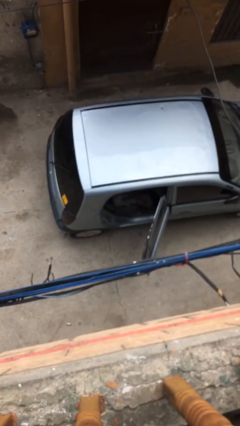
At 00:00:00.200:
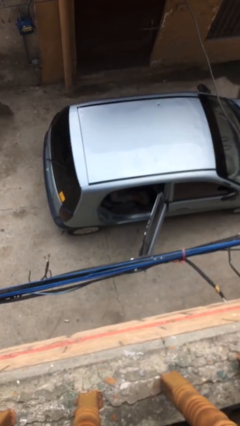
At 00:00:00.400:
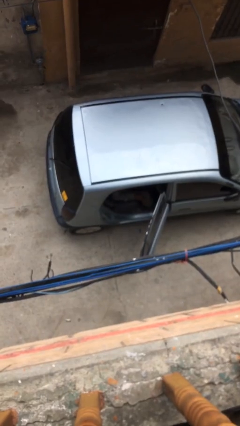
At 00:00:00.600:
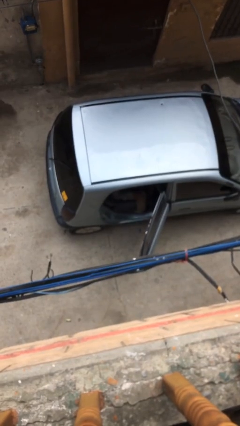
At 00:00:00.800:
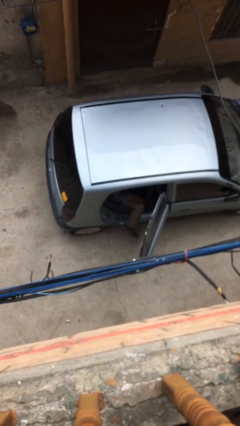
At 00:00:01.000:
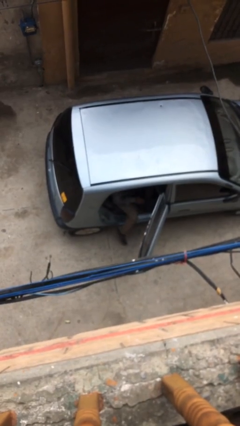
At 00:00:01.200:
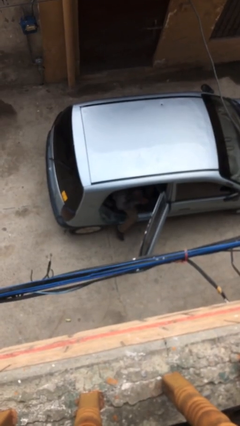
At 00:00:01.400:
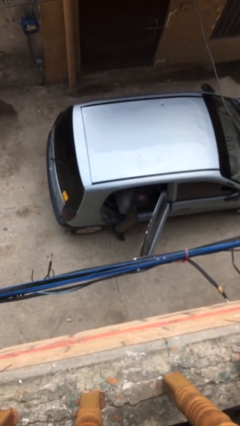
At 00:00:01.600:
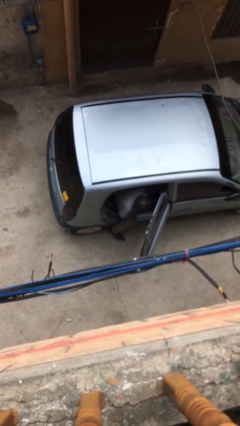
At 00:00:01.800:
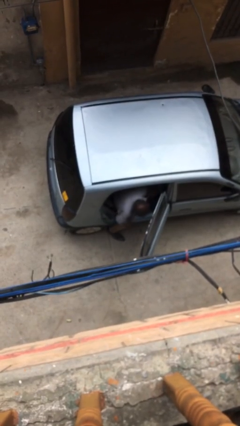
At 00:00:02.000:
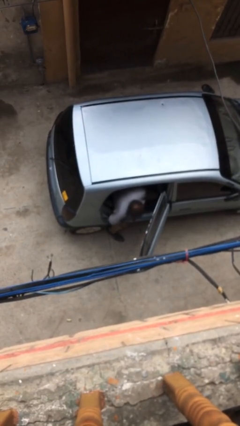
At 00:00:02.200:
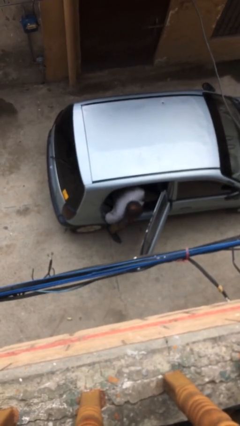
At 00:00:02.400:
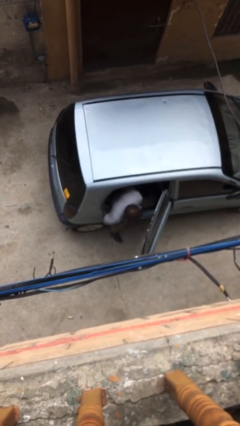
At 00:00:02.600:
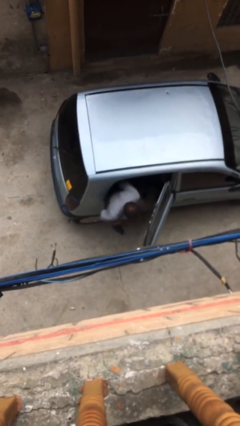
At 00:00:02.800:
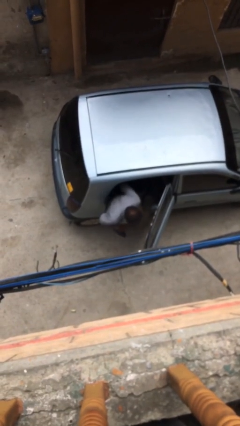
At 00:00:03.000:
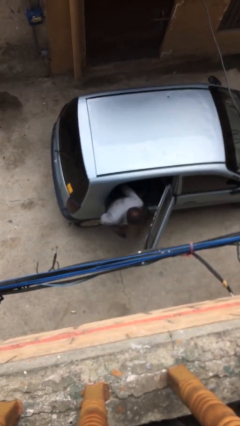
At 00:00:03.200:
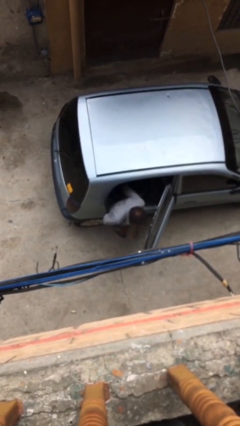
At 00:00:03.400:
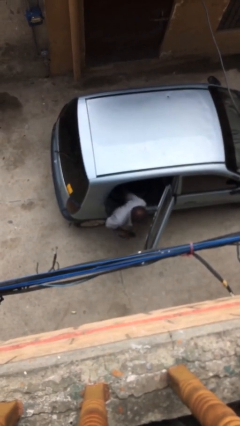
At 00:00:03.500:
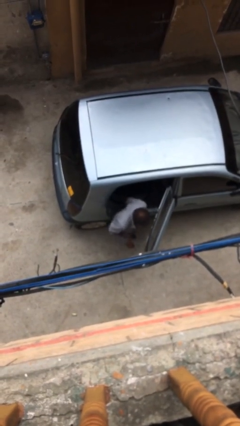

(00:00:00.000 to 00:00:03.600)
person exits car

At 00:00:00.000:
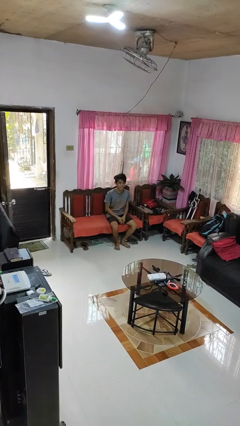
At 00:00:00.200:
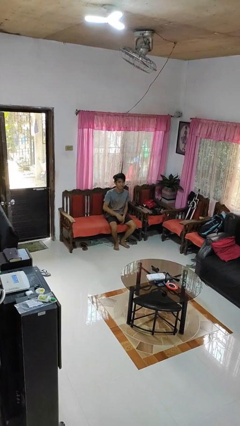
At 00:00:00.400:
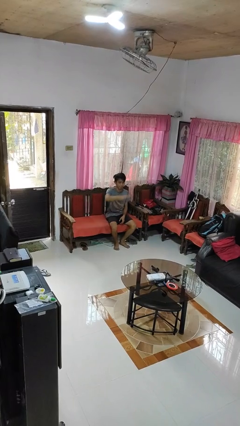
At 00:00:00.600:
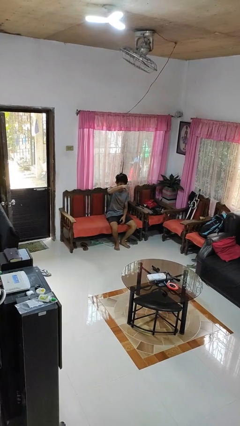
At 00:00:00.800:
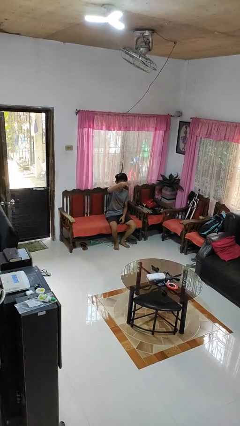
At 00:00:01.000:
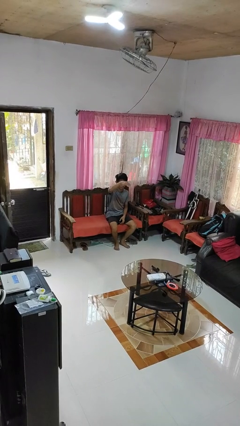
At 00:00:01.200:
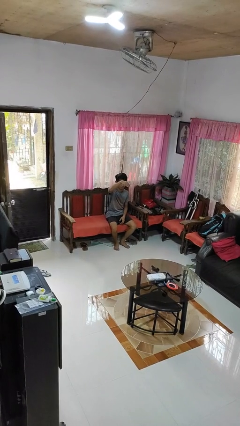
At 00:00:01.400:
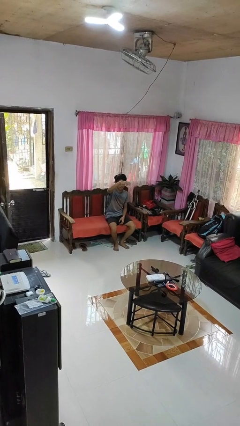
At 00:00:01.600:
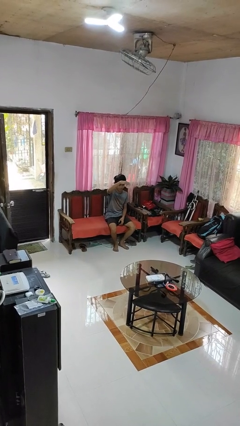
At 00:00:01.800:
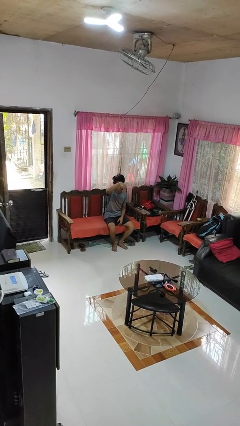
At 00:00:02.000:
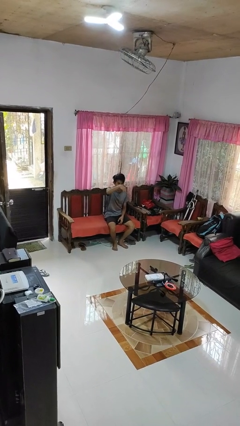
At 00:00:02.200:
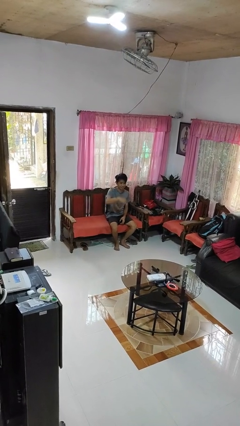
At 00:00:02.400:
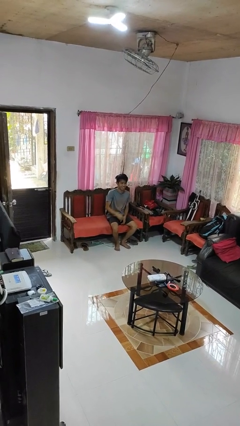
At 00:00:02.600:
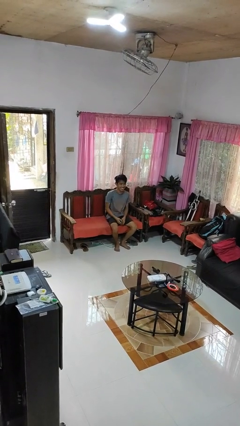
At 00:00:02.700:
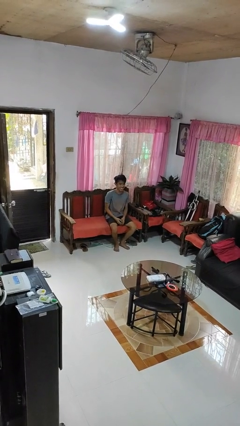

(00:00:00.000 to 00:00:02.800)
person gestures come here

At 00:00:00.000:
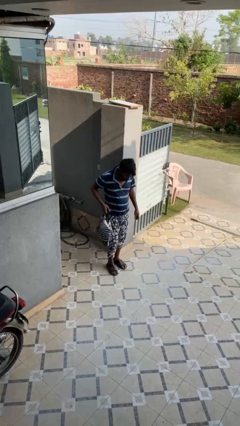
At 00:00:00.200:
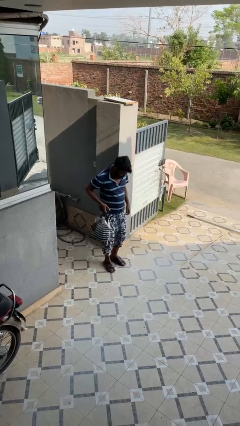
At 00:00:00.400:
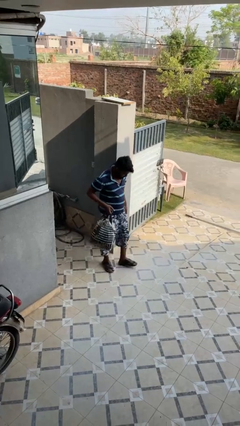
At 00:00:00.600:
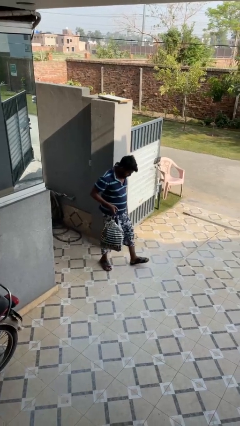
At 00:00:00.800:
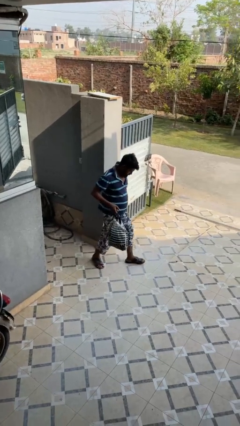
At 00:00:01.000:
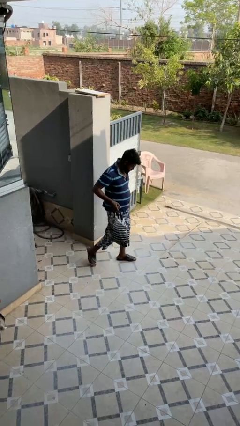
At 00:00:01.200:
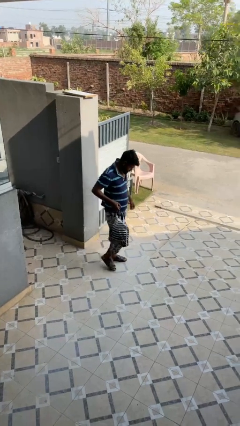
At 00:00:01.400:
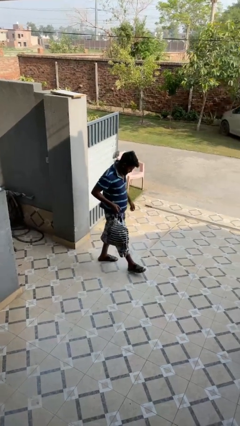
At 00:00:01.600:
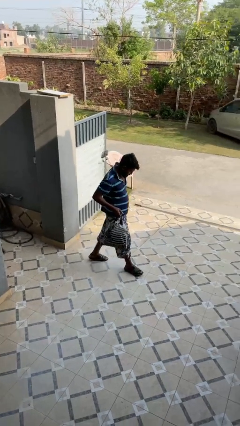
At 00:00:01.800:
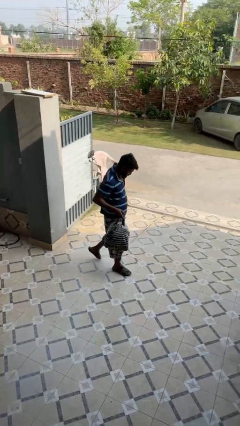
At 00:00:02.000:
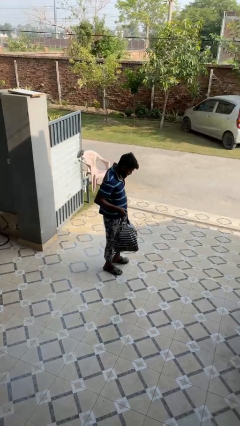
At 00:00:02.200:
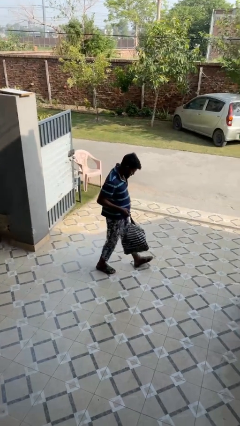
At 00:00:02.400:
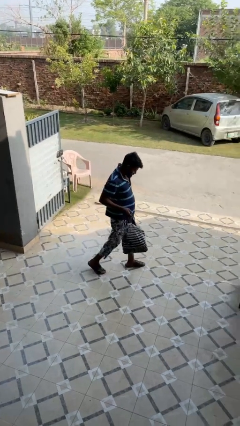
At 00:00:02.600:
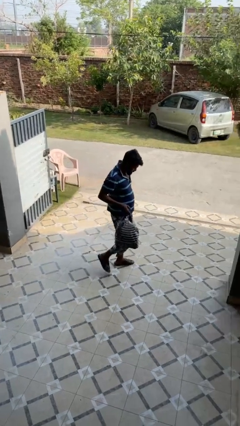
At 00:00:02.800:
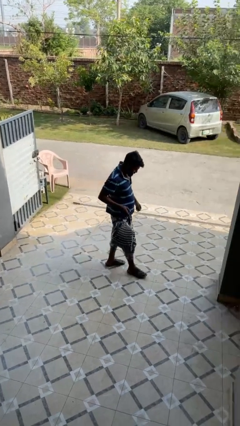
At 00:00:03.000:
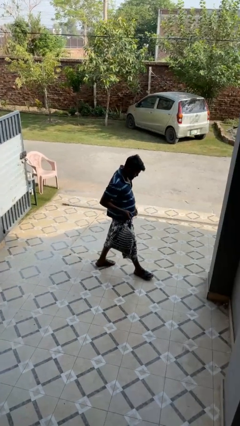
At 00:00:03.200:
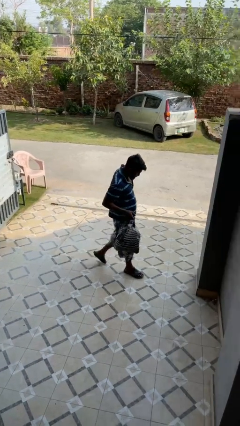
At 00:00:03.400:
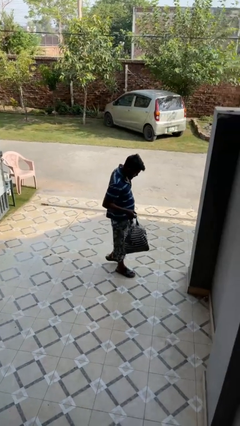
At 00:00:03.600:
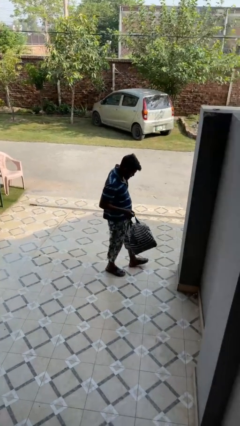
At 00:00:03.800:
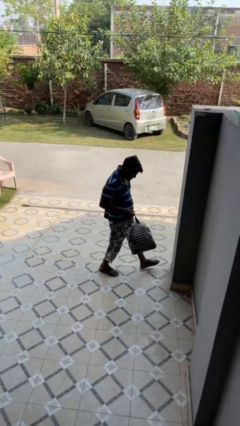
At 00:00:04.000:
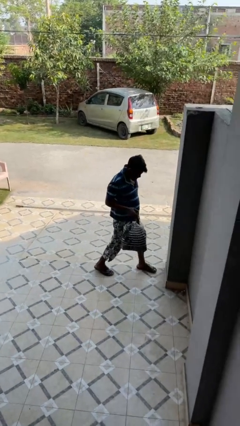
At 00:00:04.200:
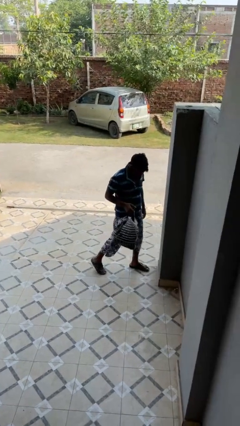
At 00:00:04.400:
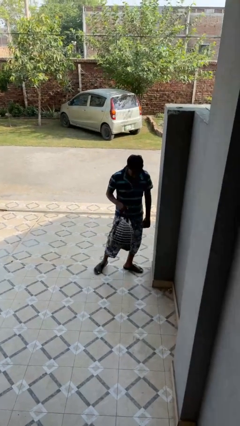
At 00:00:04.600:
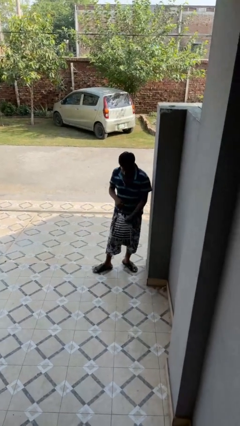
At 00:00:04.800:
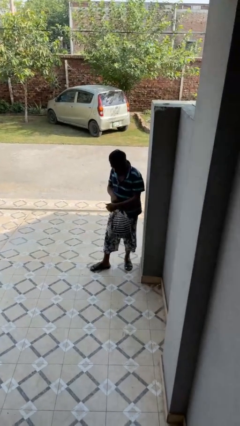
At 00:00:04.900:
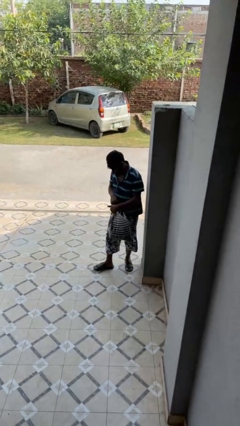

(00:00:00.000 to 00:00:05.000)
person carries groceries

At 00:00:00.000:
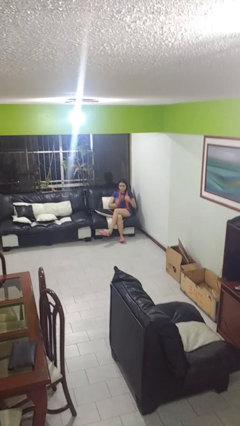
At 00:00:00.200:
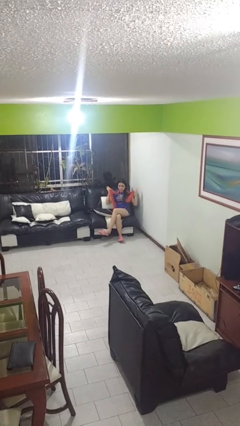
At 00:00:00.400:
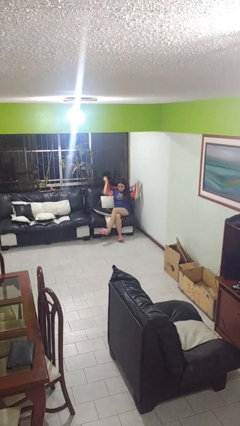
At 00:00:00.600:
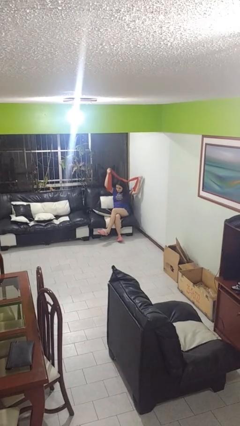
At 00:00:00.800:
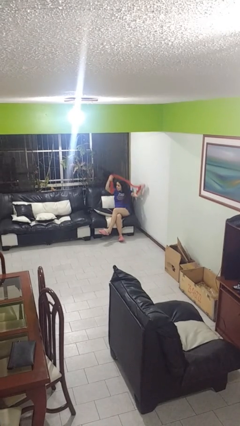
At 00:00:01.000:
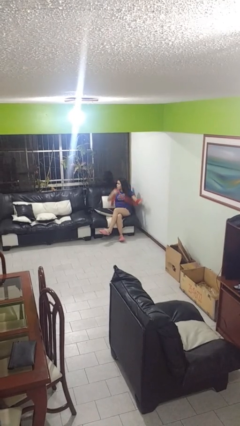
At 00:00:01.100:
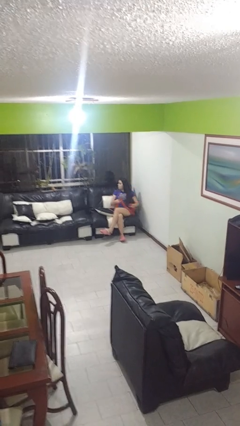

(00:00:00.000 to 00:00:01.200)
person takes off scarf

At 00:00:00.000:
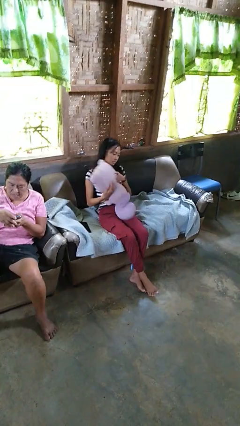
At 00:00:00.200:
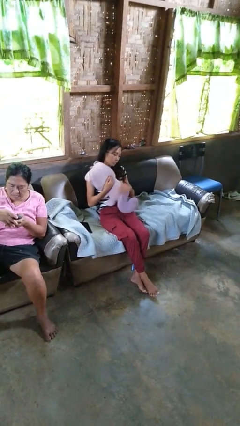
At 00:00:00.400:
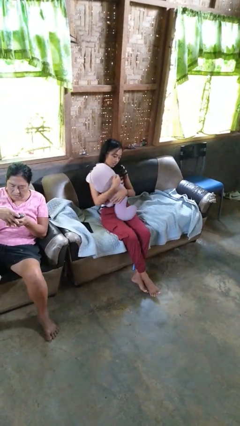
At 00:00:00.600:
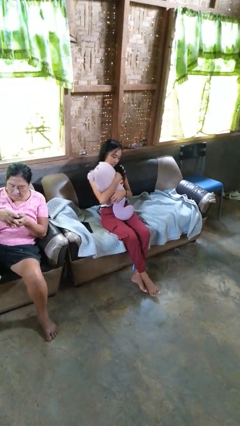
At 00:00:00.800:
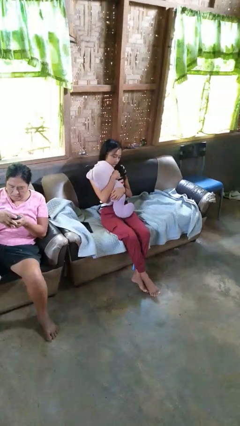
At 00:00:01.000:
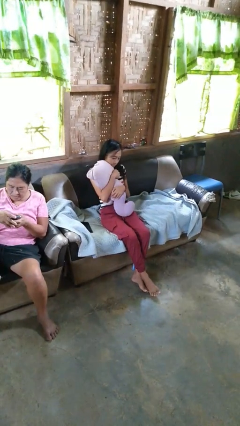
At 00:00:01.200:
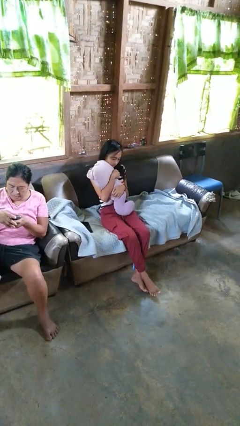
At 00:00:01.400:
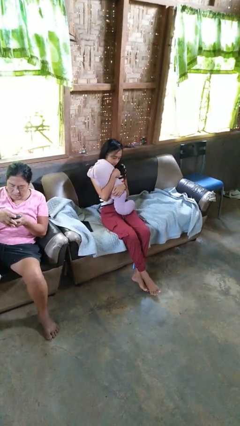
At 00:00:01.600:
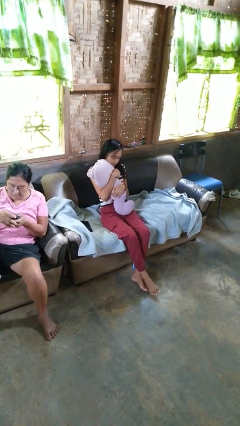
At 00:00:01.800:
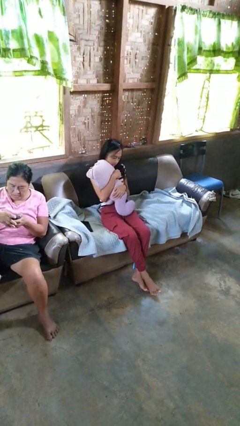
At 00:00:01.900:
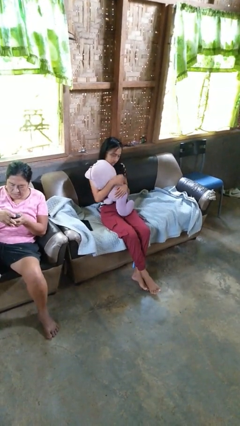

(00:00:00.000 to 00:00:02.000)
person hugs stuffed animal

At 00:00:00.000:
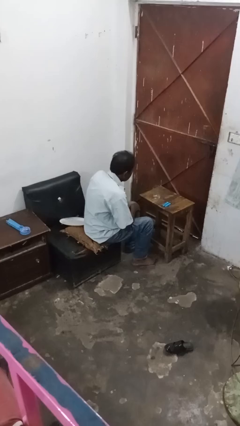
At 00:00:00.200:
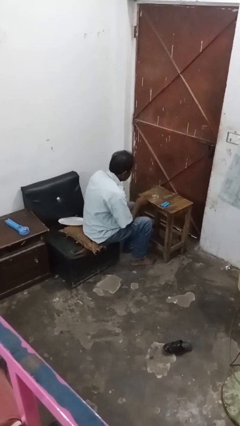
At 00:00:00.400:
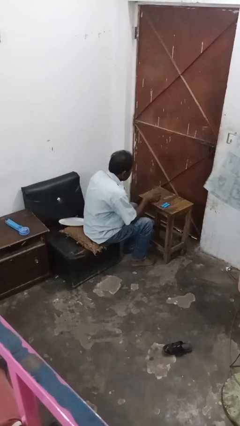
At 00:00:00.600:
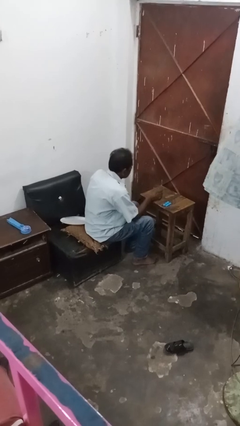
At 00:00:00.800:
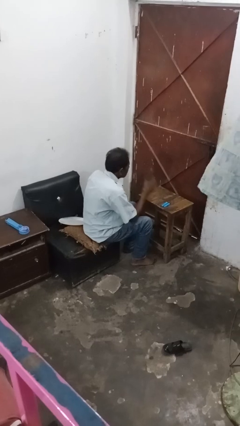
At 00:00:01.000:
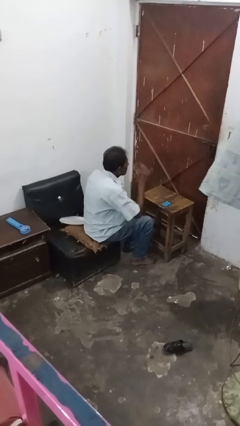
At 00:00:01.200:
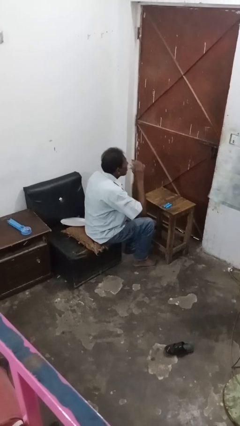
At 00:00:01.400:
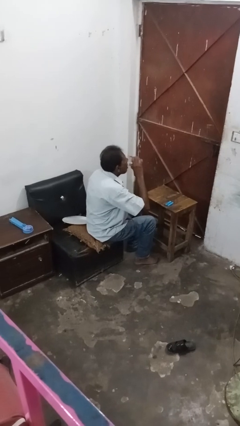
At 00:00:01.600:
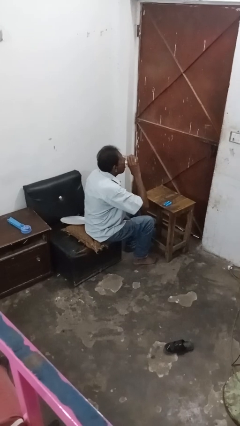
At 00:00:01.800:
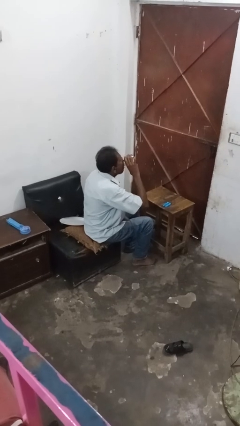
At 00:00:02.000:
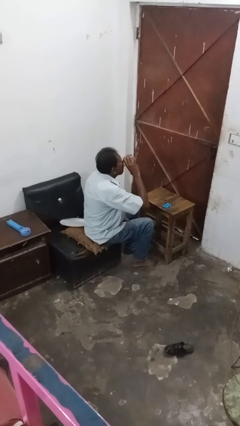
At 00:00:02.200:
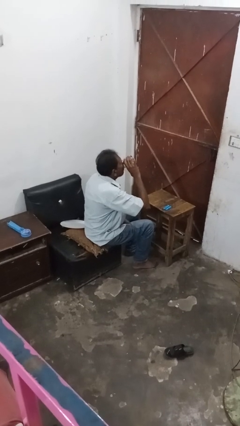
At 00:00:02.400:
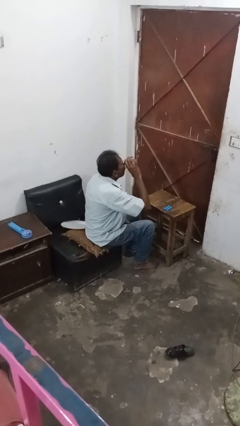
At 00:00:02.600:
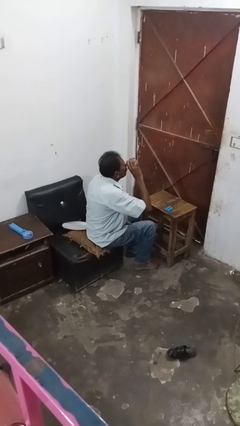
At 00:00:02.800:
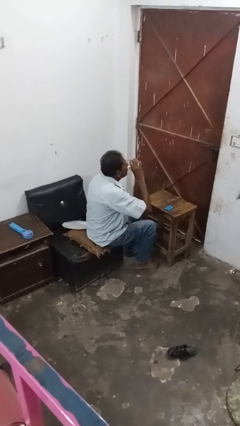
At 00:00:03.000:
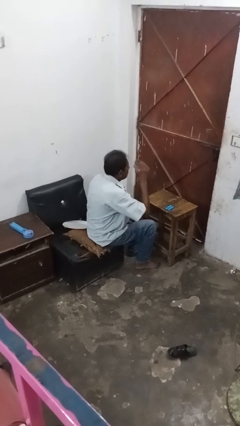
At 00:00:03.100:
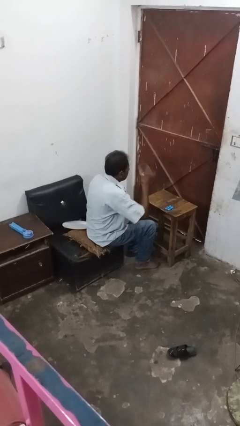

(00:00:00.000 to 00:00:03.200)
person drinks from cup
